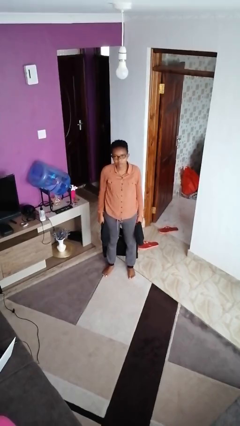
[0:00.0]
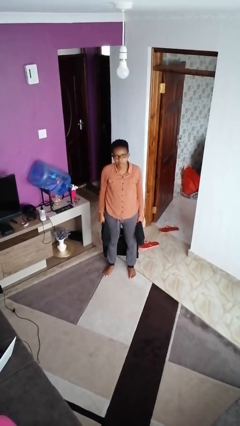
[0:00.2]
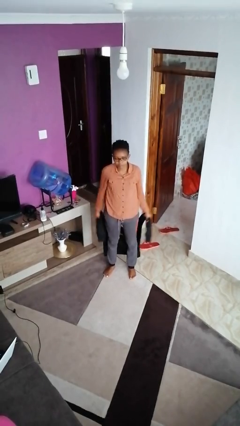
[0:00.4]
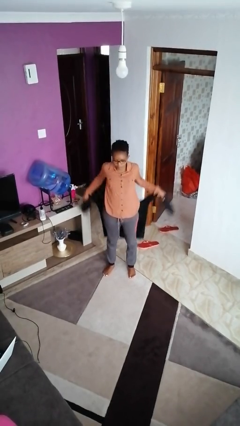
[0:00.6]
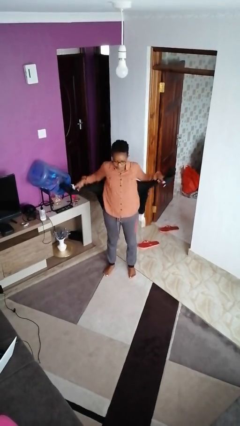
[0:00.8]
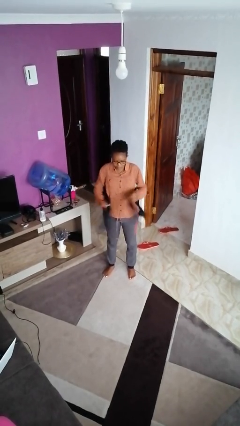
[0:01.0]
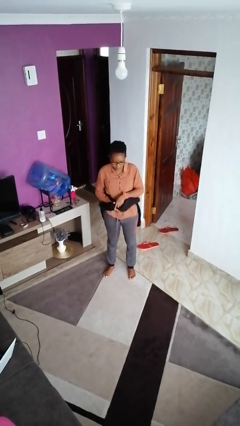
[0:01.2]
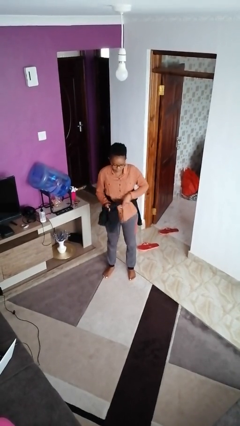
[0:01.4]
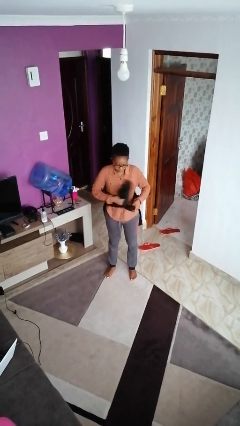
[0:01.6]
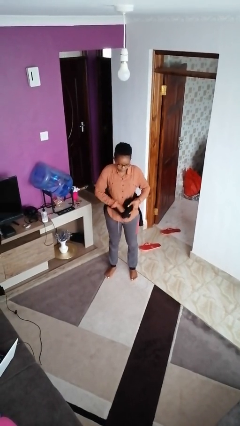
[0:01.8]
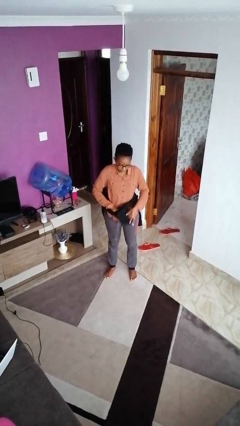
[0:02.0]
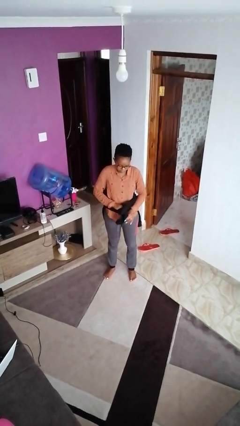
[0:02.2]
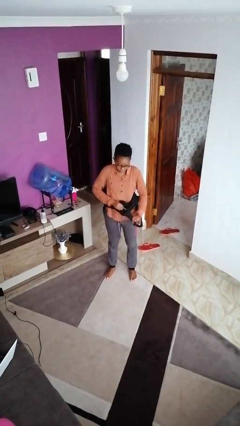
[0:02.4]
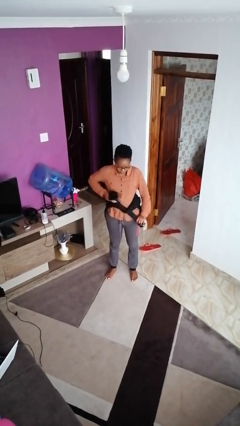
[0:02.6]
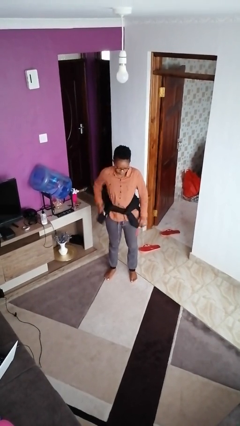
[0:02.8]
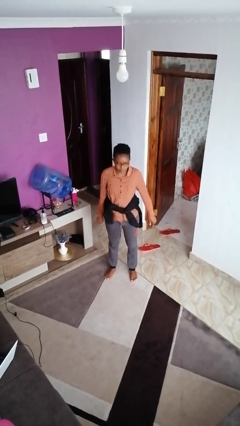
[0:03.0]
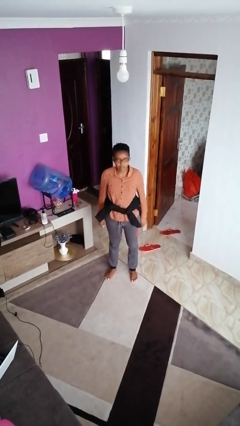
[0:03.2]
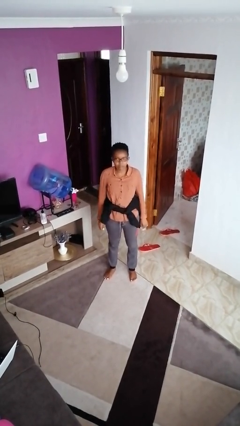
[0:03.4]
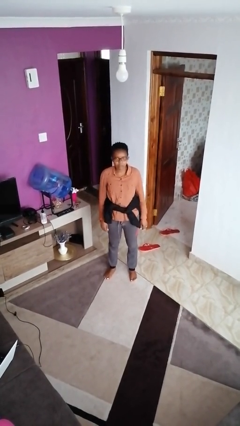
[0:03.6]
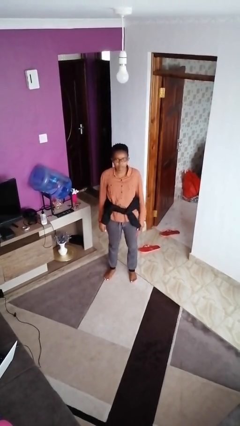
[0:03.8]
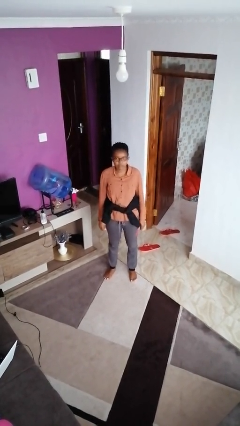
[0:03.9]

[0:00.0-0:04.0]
person ties jacket around waist

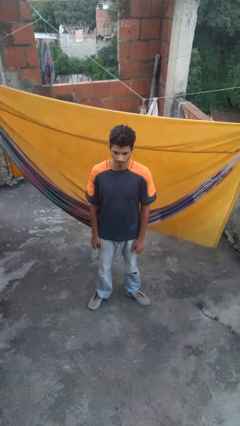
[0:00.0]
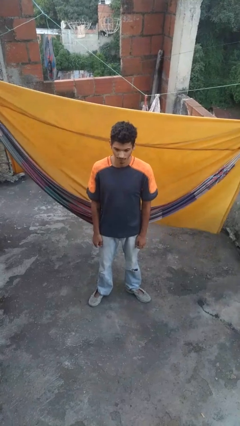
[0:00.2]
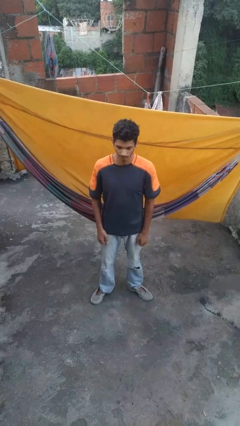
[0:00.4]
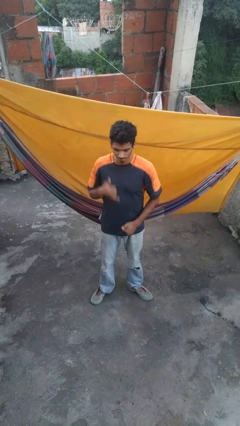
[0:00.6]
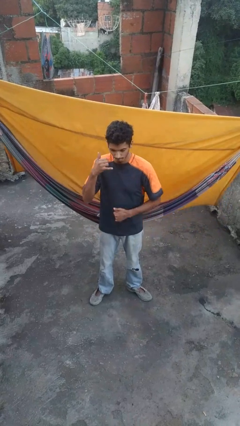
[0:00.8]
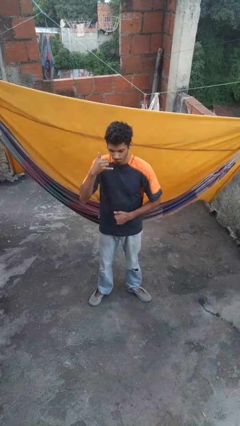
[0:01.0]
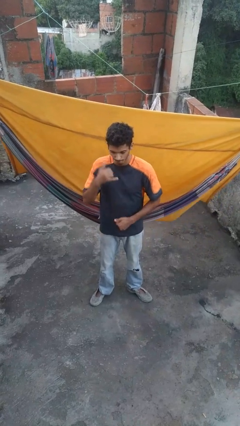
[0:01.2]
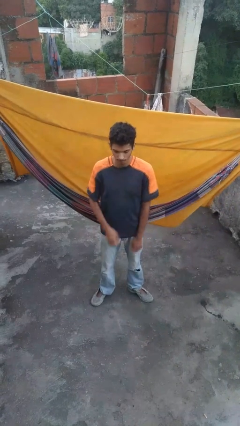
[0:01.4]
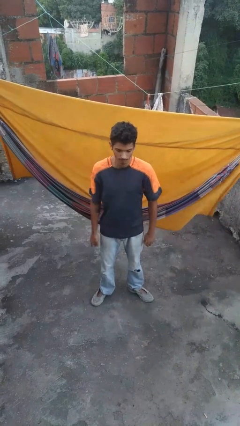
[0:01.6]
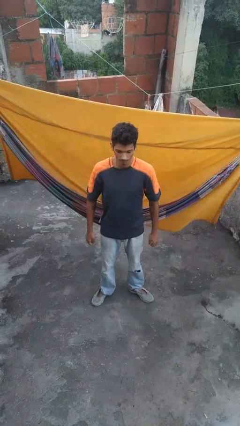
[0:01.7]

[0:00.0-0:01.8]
person gestures call me

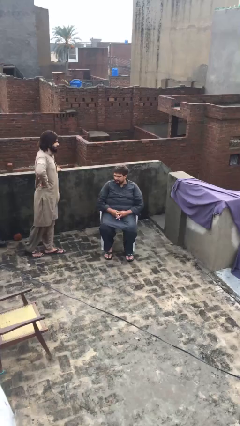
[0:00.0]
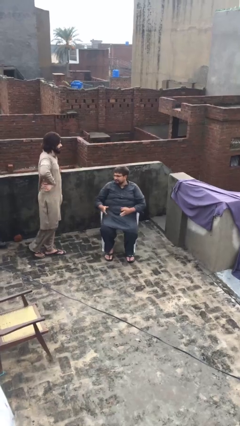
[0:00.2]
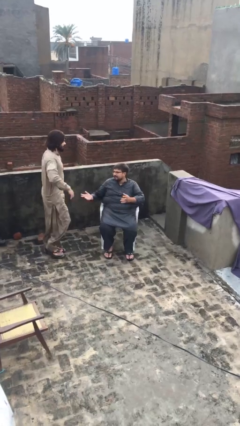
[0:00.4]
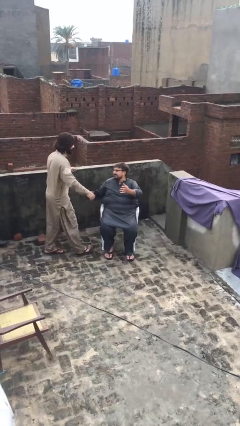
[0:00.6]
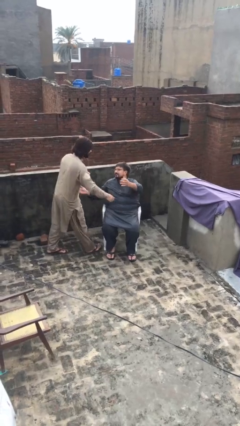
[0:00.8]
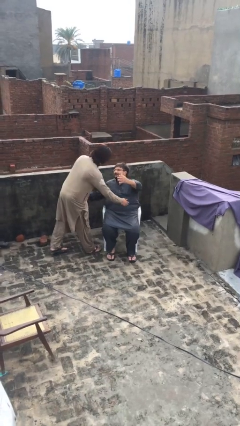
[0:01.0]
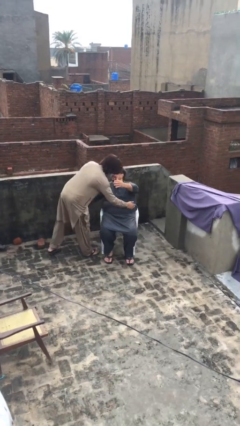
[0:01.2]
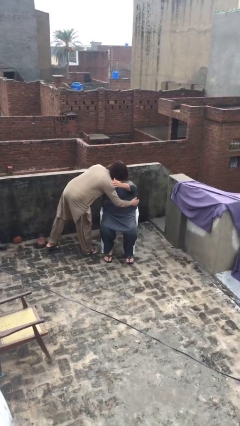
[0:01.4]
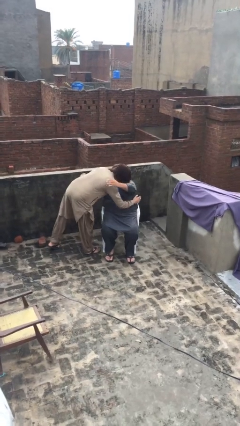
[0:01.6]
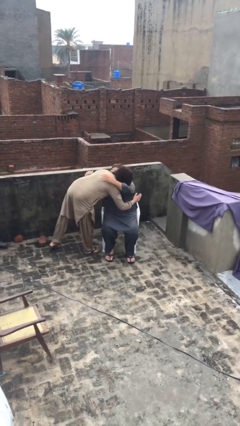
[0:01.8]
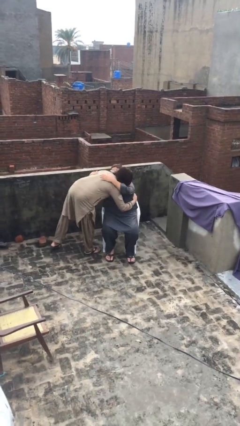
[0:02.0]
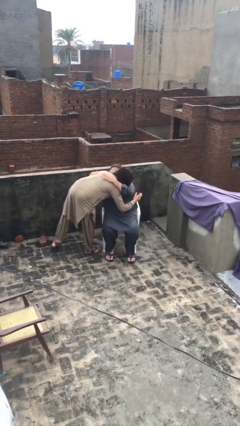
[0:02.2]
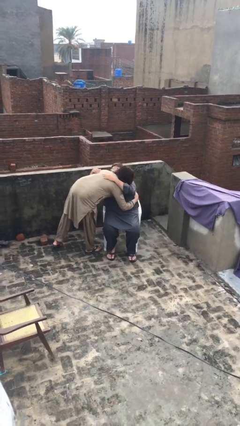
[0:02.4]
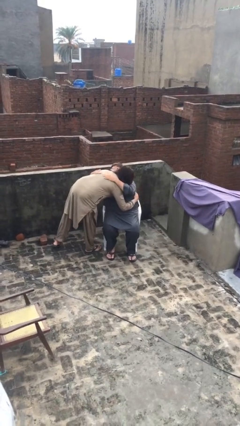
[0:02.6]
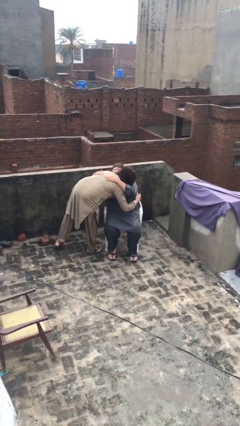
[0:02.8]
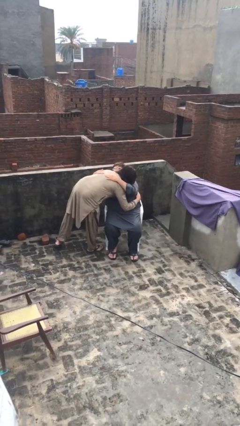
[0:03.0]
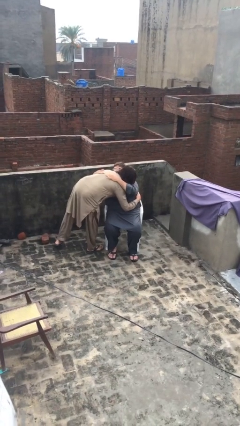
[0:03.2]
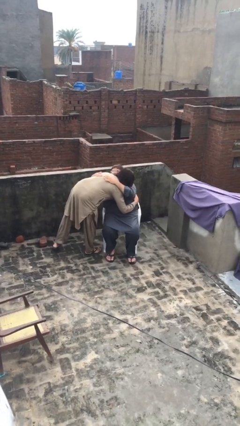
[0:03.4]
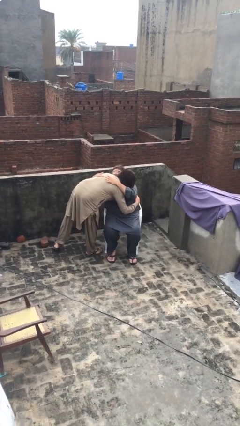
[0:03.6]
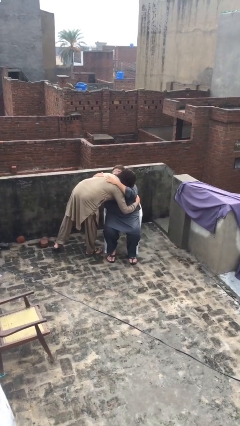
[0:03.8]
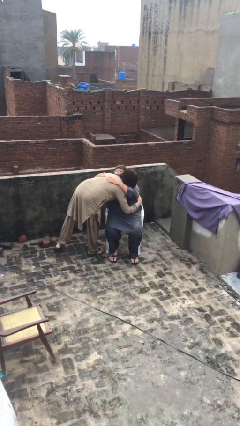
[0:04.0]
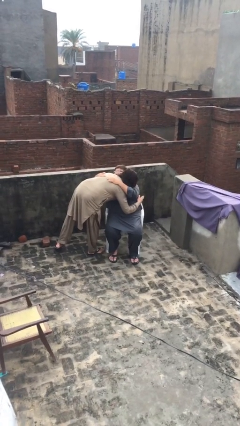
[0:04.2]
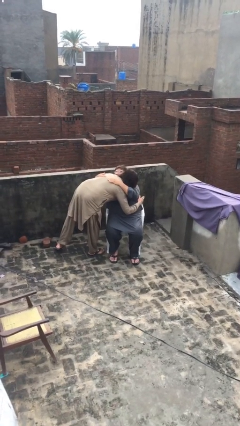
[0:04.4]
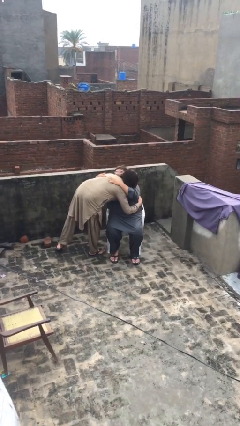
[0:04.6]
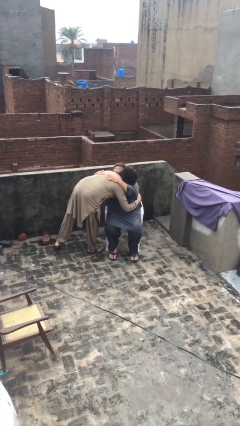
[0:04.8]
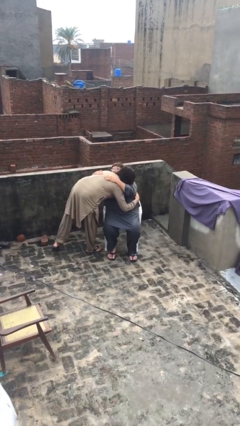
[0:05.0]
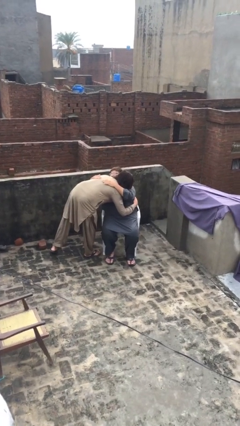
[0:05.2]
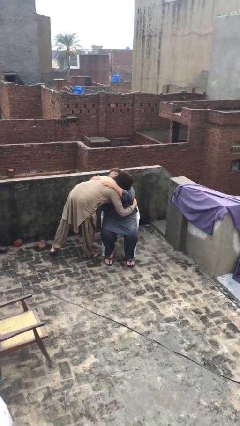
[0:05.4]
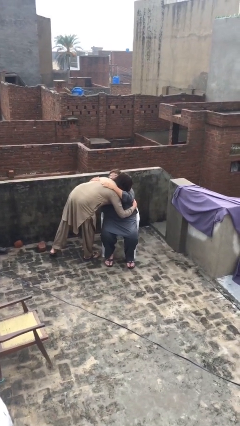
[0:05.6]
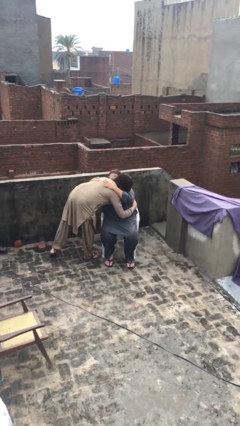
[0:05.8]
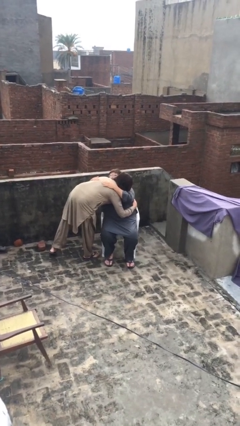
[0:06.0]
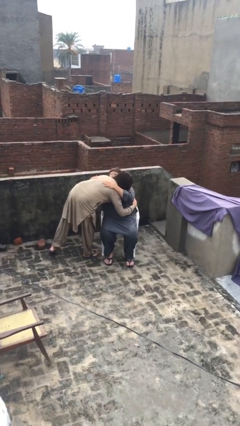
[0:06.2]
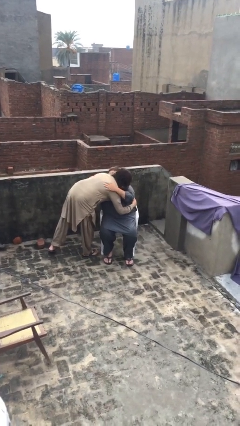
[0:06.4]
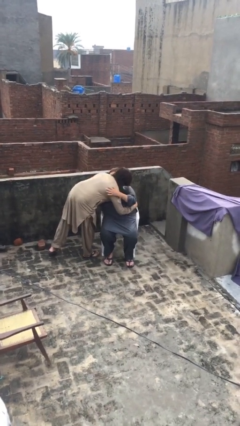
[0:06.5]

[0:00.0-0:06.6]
person embraces person

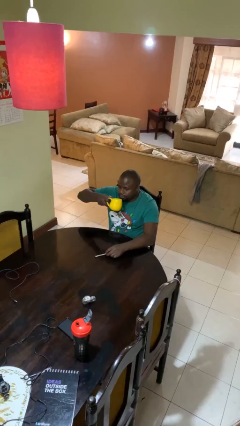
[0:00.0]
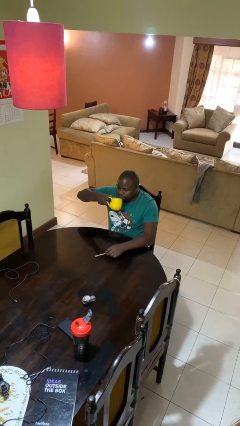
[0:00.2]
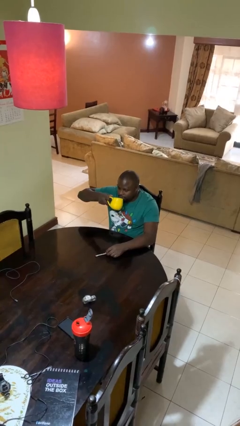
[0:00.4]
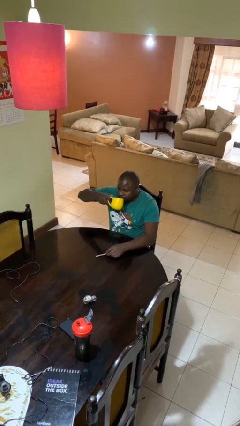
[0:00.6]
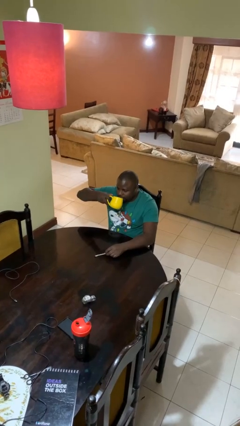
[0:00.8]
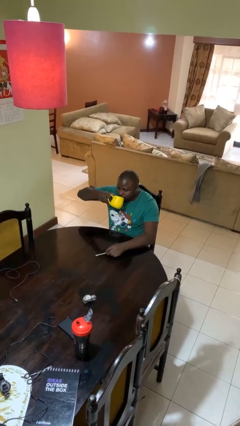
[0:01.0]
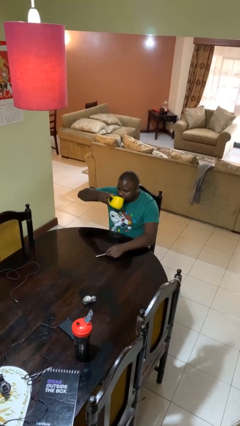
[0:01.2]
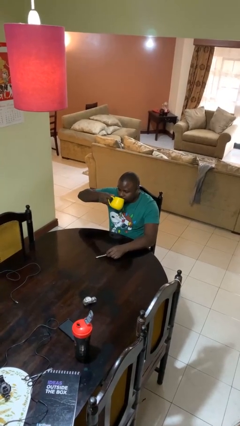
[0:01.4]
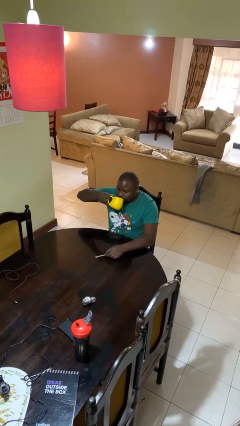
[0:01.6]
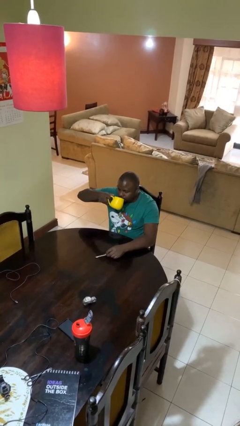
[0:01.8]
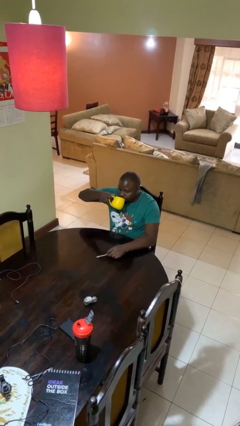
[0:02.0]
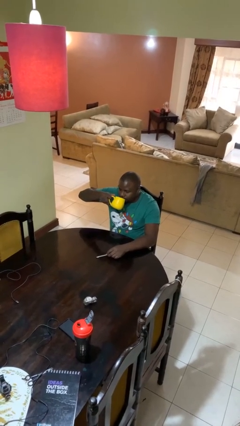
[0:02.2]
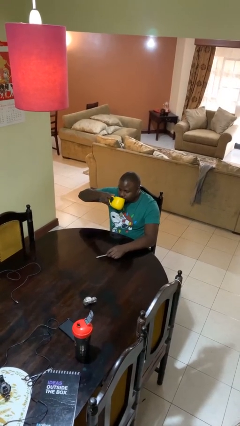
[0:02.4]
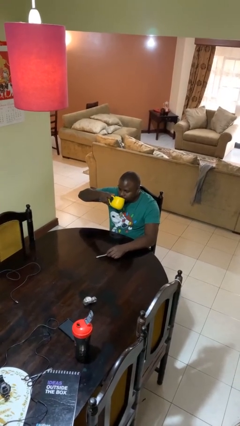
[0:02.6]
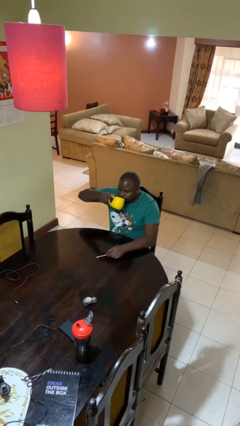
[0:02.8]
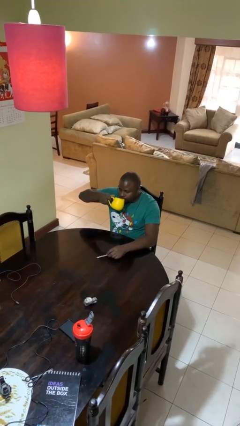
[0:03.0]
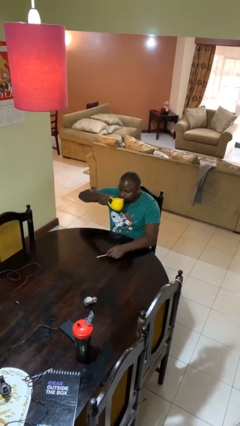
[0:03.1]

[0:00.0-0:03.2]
person drinks from mug

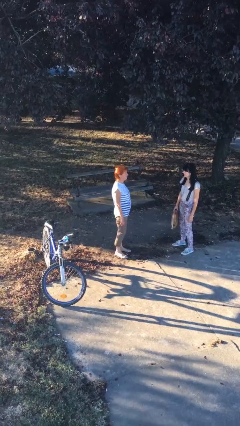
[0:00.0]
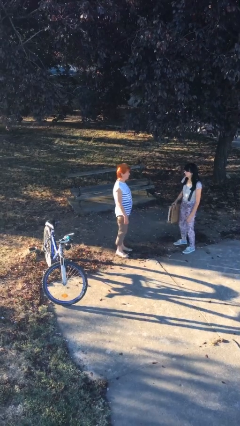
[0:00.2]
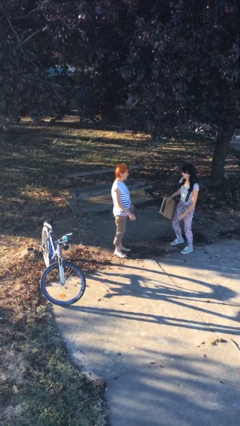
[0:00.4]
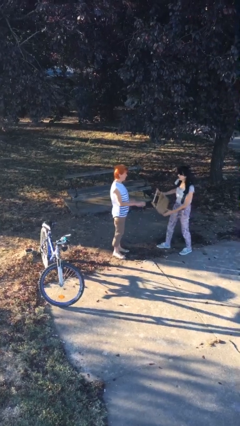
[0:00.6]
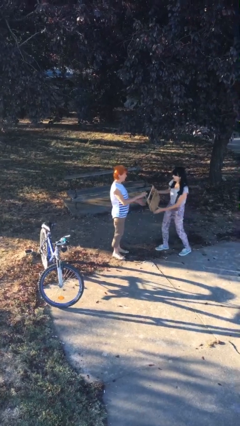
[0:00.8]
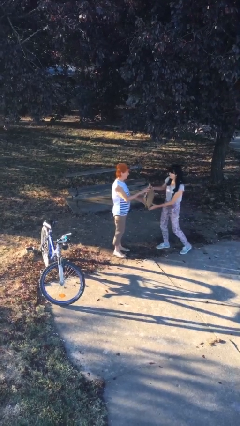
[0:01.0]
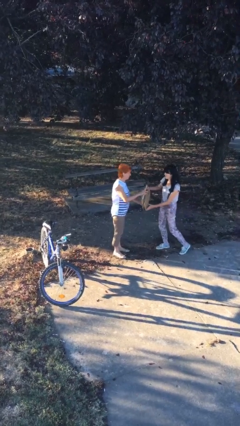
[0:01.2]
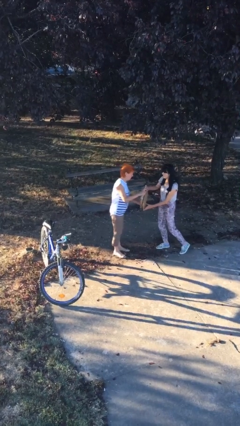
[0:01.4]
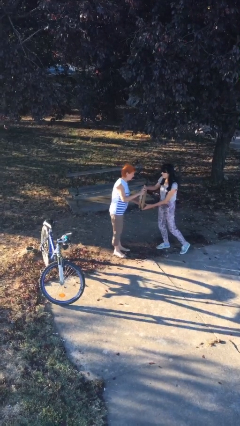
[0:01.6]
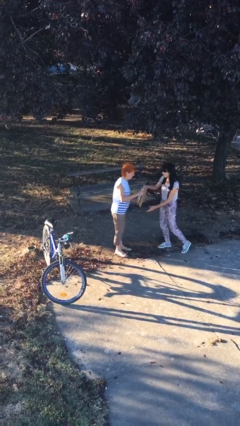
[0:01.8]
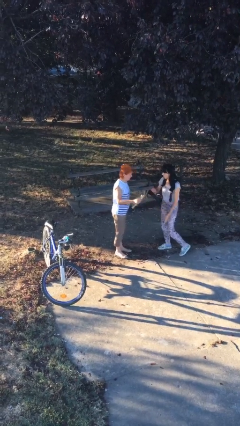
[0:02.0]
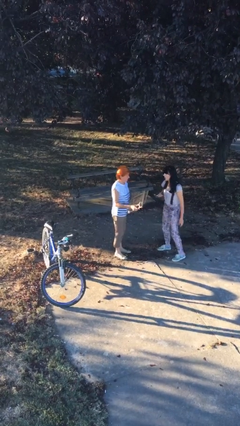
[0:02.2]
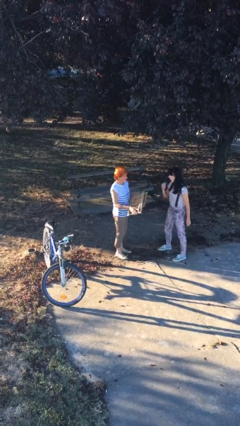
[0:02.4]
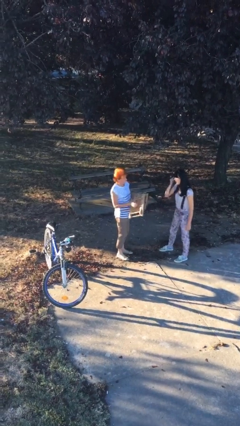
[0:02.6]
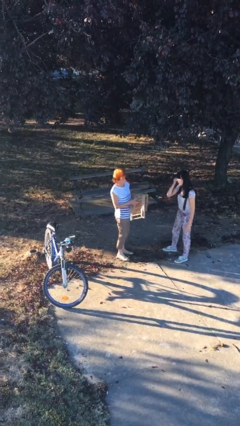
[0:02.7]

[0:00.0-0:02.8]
person transfers object to person
